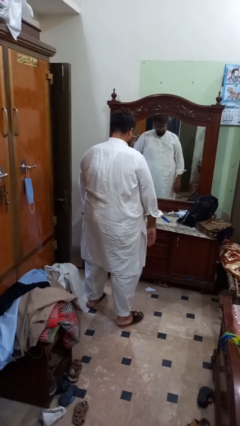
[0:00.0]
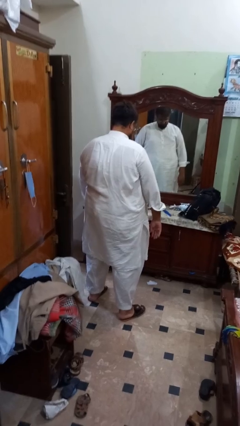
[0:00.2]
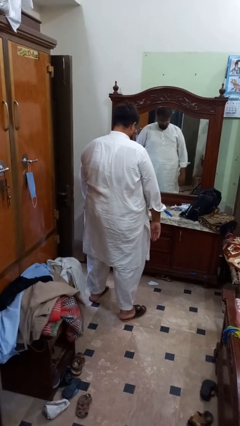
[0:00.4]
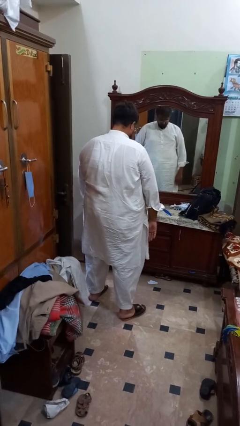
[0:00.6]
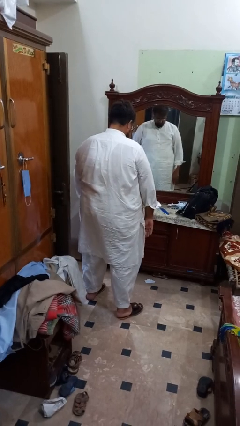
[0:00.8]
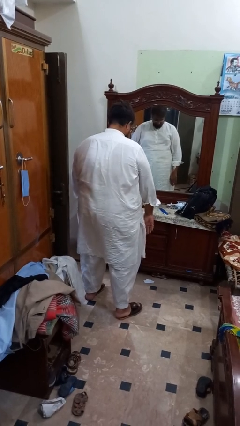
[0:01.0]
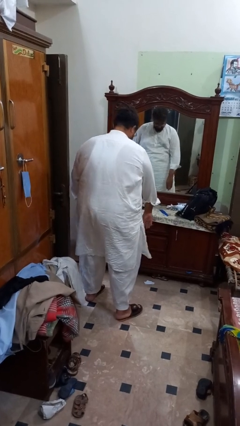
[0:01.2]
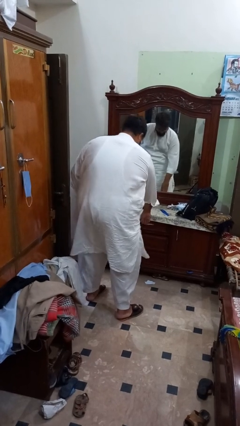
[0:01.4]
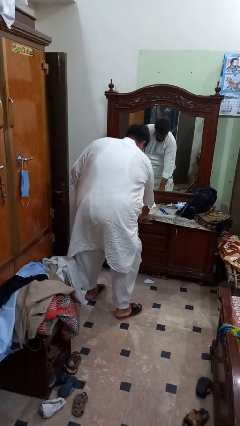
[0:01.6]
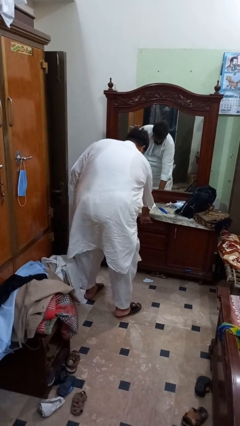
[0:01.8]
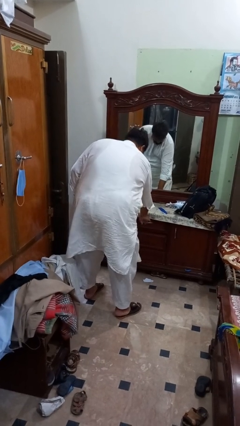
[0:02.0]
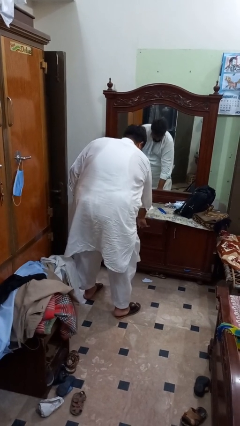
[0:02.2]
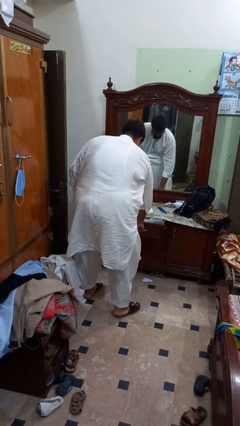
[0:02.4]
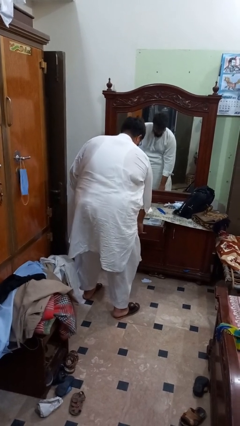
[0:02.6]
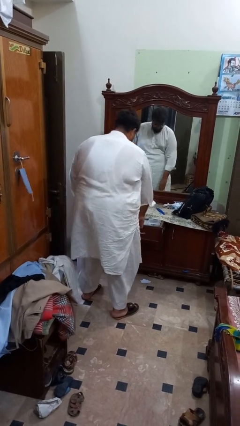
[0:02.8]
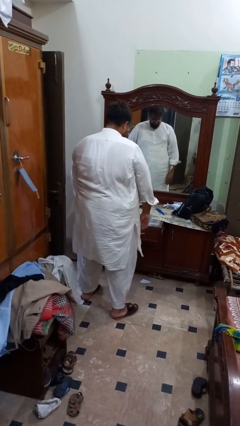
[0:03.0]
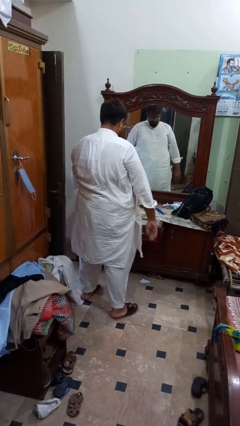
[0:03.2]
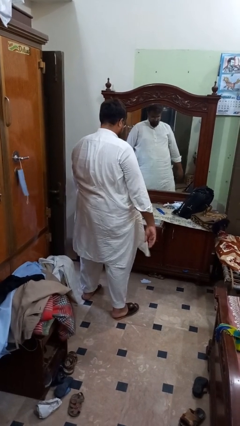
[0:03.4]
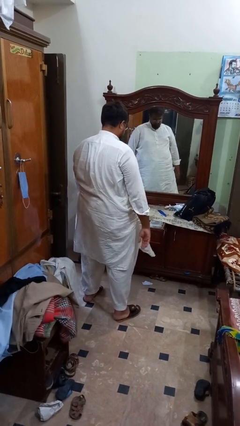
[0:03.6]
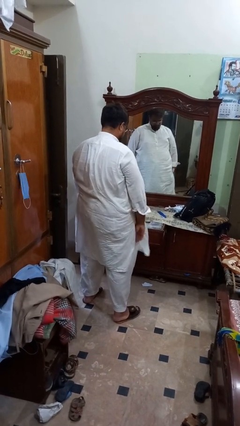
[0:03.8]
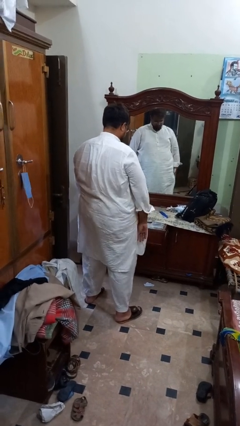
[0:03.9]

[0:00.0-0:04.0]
person opens dresser drawer

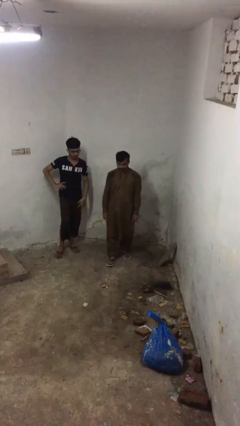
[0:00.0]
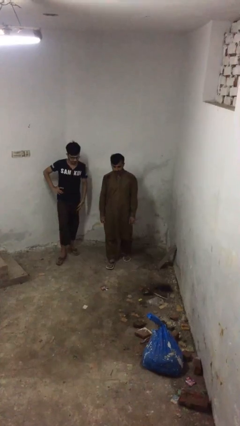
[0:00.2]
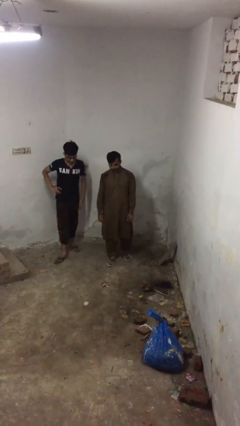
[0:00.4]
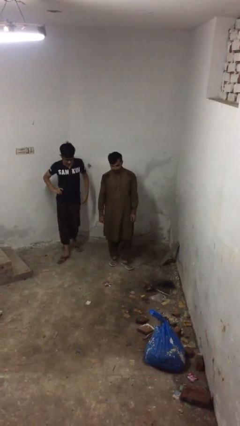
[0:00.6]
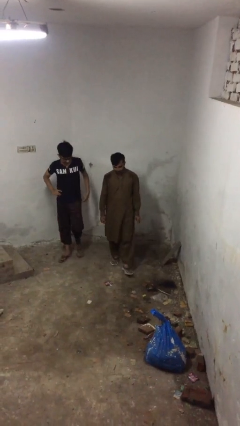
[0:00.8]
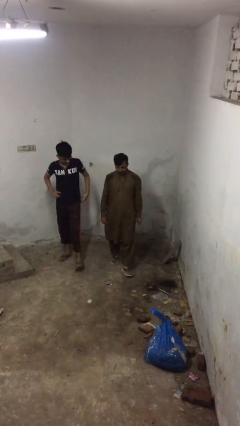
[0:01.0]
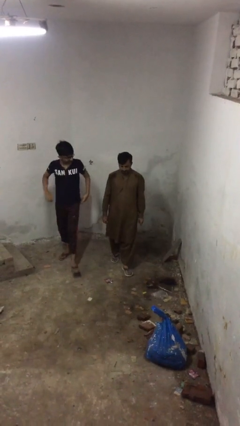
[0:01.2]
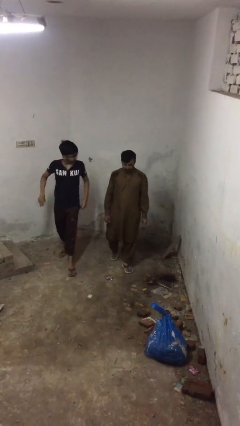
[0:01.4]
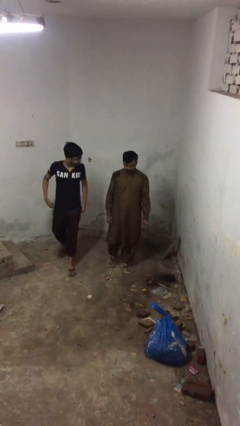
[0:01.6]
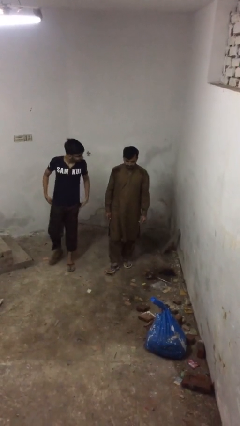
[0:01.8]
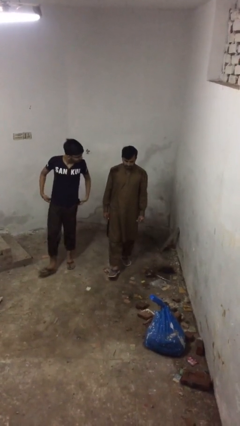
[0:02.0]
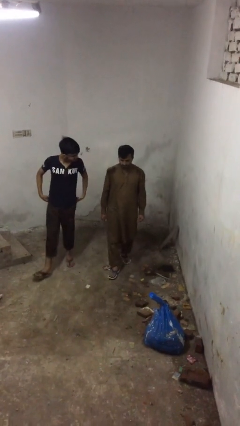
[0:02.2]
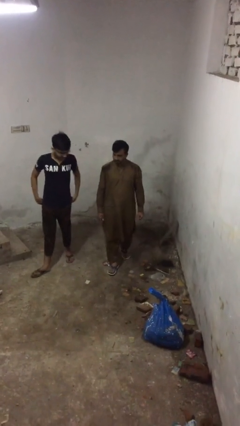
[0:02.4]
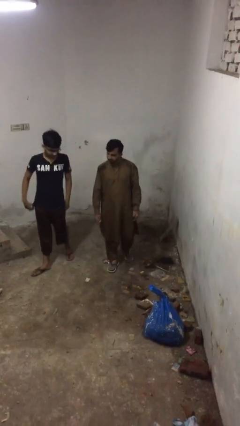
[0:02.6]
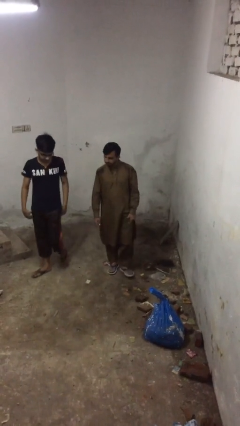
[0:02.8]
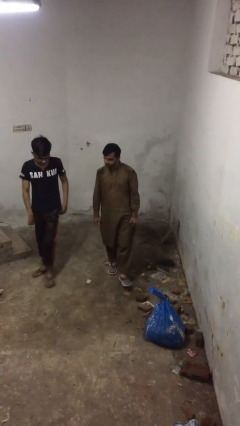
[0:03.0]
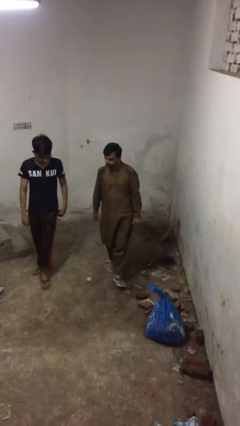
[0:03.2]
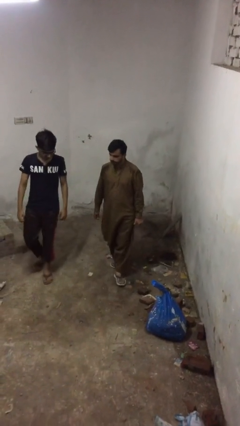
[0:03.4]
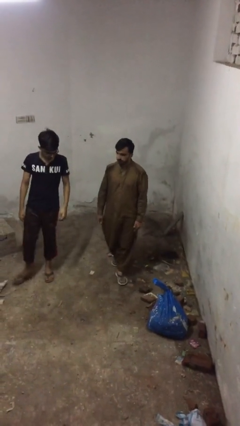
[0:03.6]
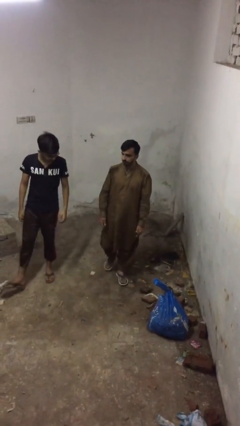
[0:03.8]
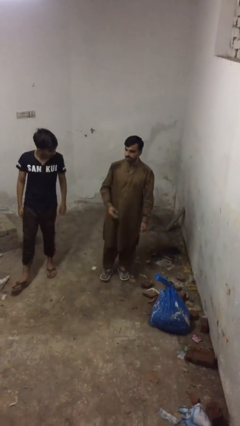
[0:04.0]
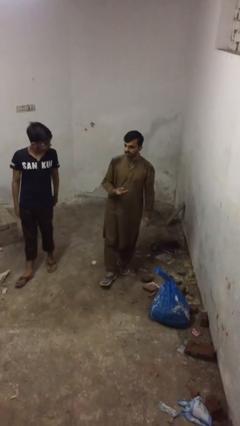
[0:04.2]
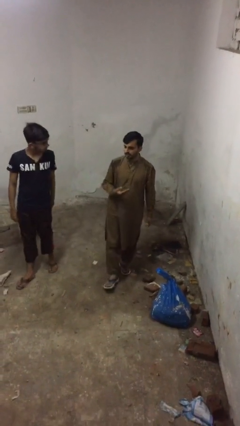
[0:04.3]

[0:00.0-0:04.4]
person talks to person

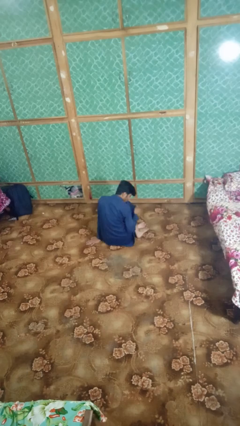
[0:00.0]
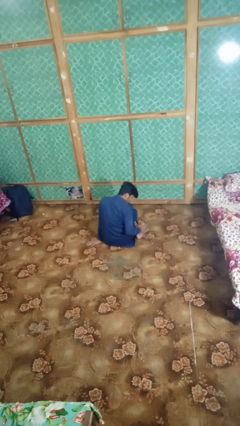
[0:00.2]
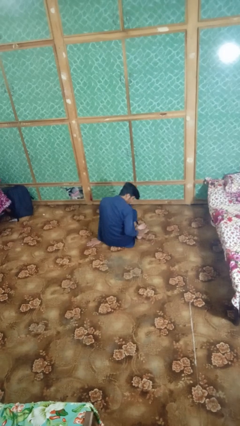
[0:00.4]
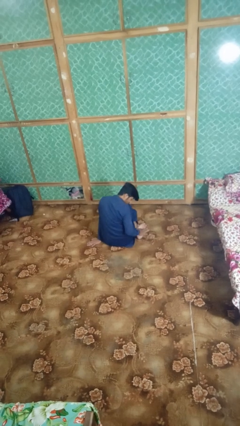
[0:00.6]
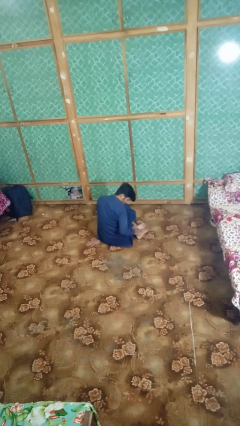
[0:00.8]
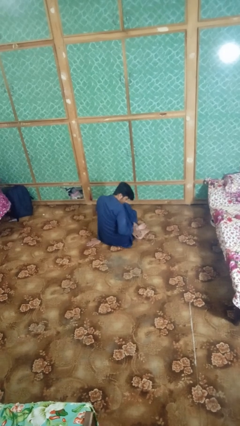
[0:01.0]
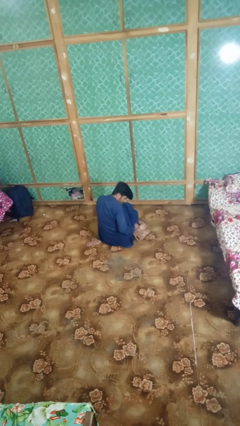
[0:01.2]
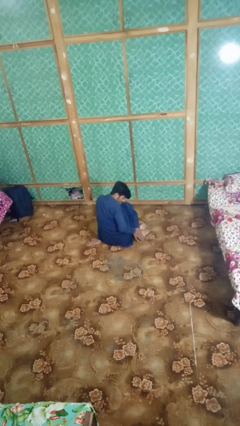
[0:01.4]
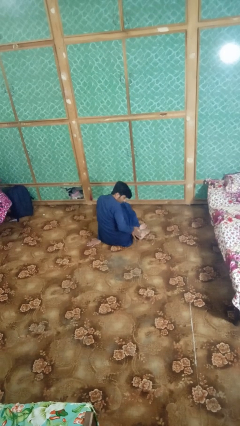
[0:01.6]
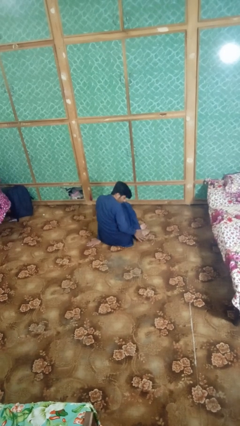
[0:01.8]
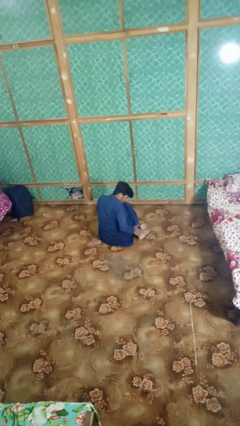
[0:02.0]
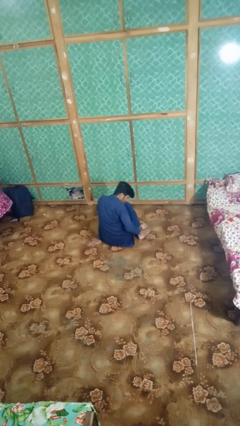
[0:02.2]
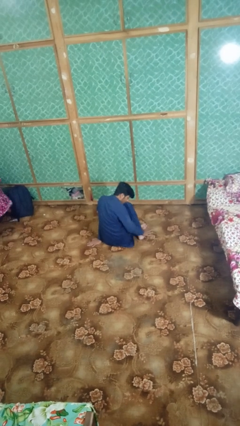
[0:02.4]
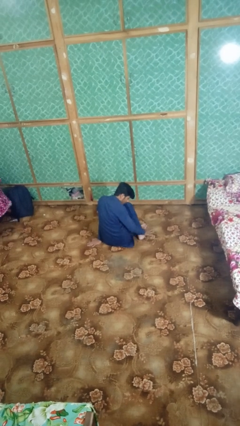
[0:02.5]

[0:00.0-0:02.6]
person rubs foot

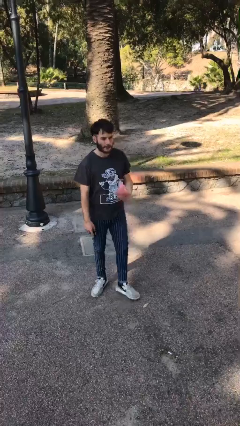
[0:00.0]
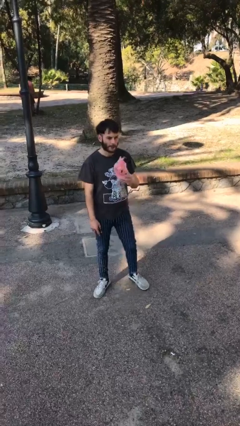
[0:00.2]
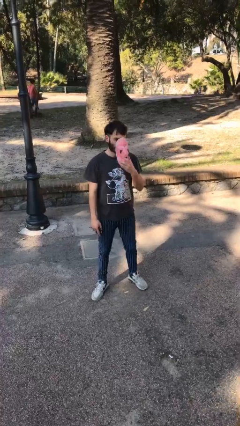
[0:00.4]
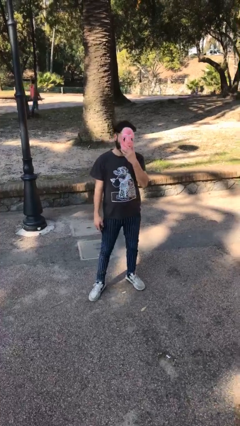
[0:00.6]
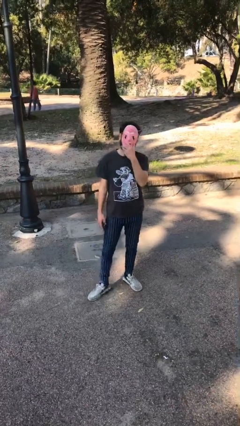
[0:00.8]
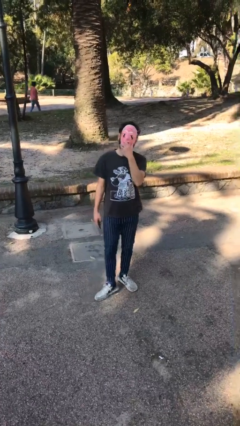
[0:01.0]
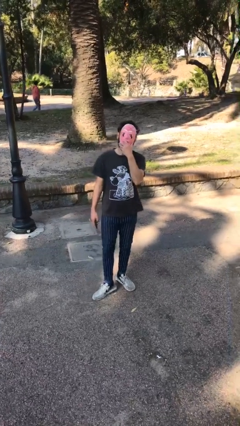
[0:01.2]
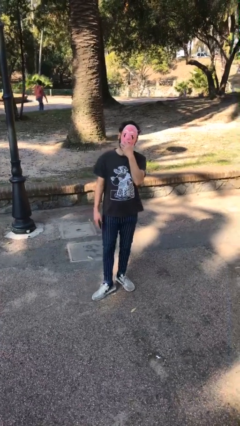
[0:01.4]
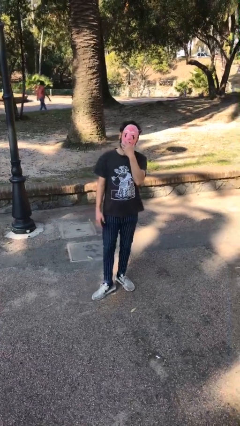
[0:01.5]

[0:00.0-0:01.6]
person puts on facemask

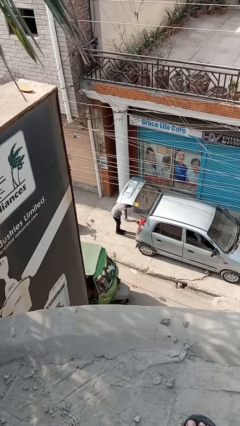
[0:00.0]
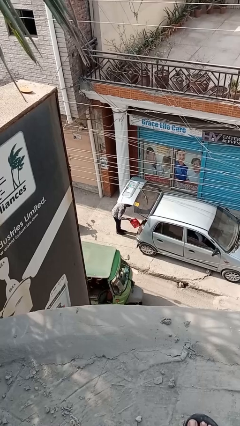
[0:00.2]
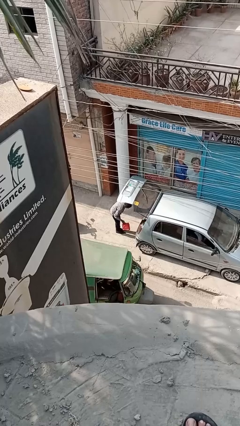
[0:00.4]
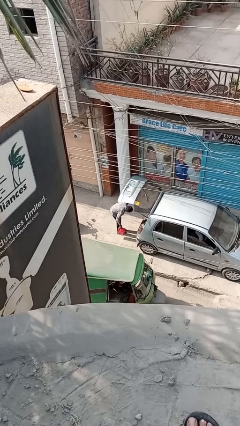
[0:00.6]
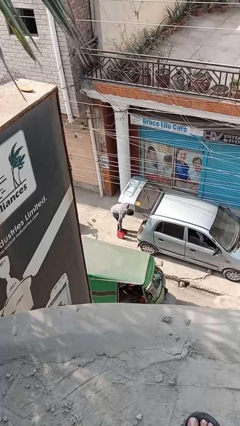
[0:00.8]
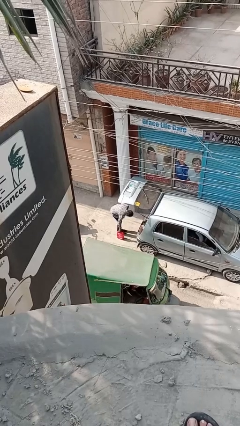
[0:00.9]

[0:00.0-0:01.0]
person unloads car

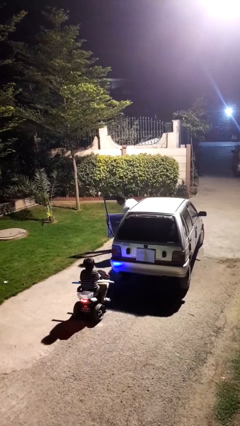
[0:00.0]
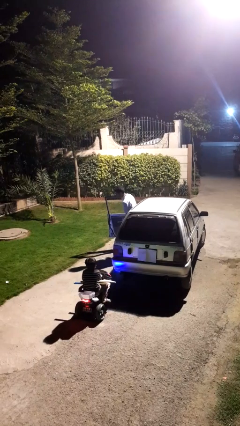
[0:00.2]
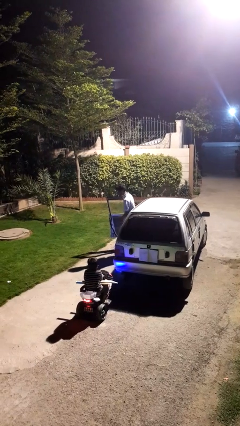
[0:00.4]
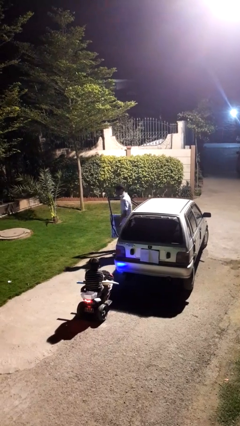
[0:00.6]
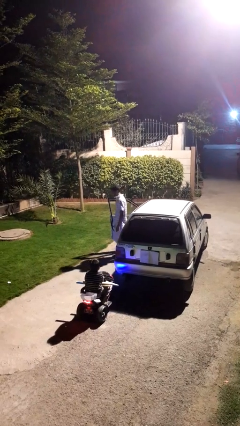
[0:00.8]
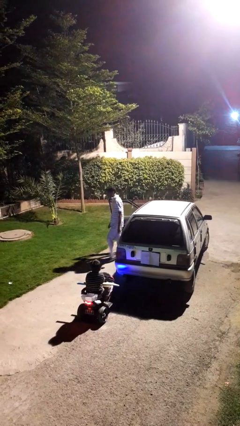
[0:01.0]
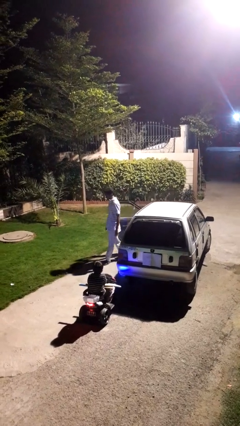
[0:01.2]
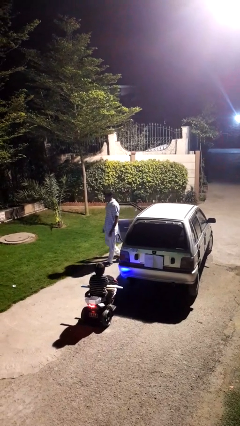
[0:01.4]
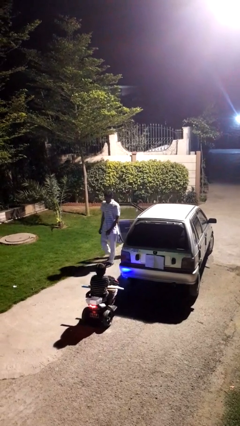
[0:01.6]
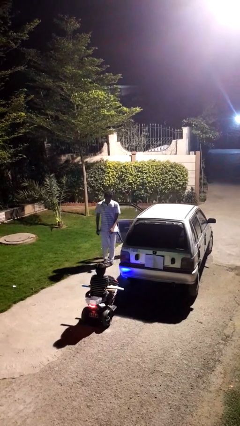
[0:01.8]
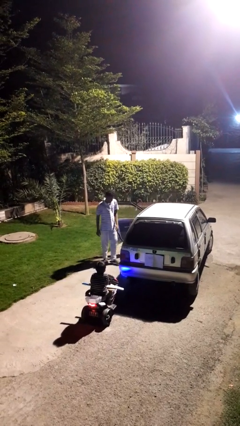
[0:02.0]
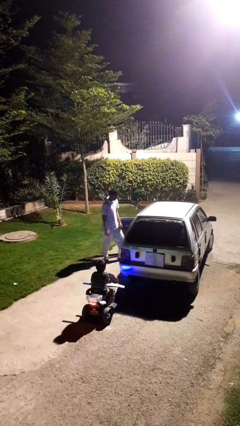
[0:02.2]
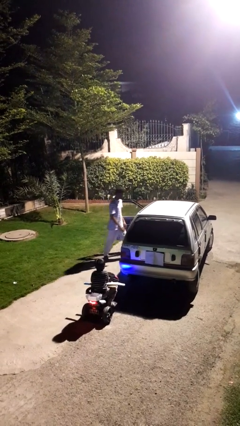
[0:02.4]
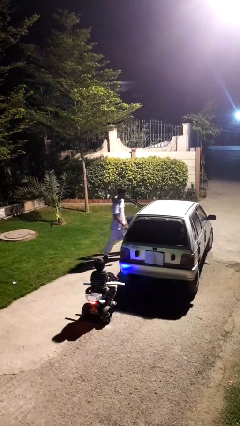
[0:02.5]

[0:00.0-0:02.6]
person exits car

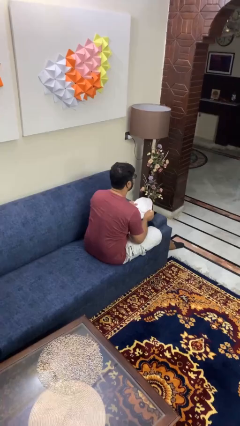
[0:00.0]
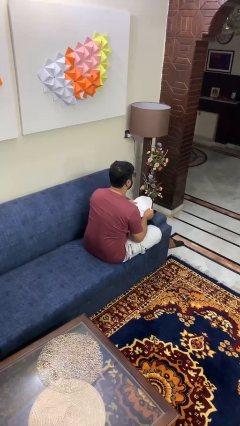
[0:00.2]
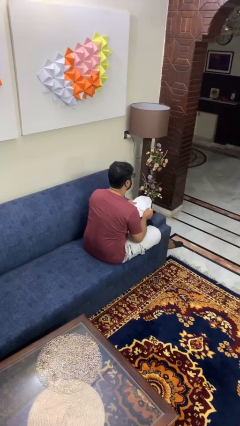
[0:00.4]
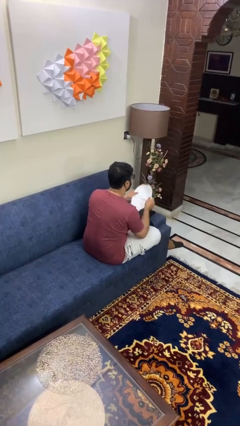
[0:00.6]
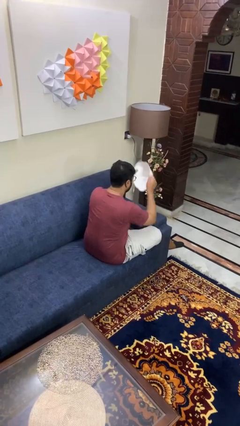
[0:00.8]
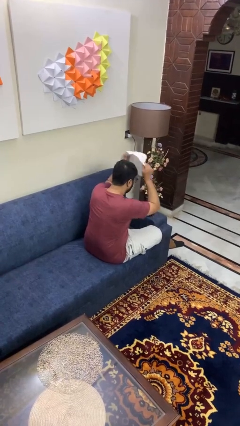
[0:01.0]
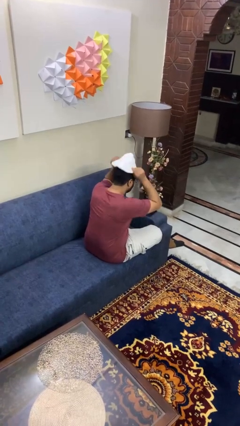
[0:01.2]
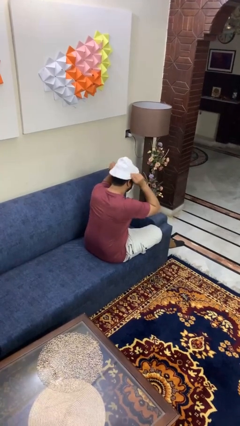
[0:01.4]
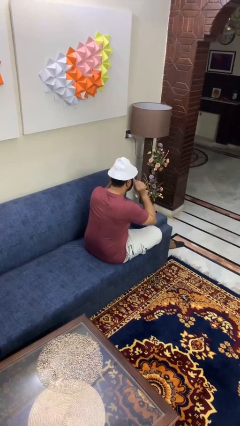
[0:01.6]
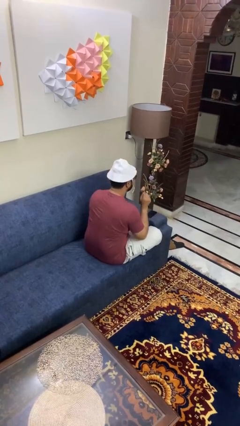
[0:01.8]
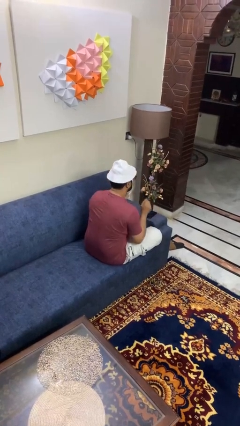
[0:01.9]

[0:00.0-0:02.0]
person puts on hat
